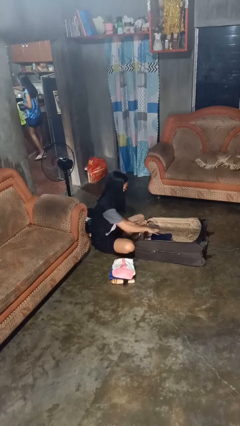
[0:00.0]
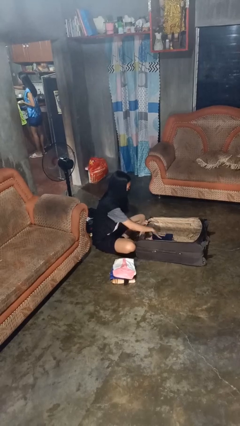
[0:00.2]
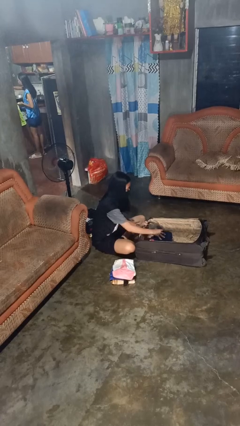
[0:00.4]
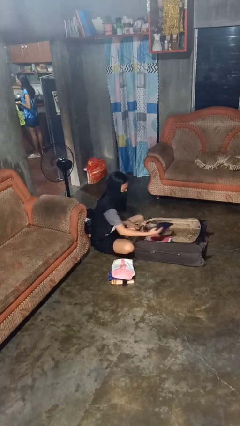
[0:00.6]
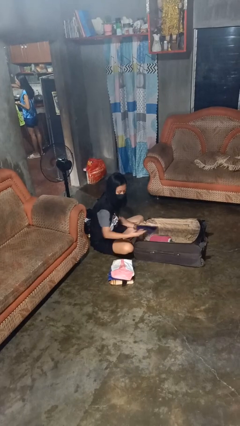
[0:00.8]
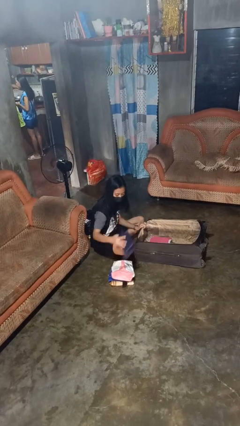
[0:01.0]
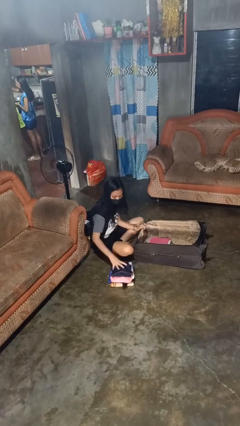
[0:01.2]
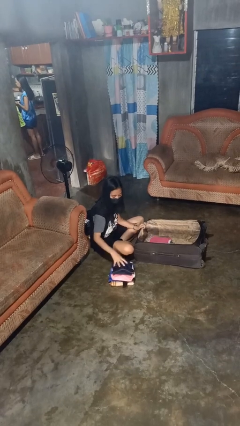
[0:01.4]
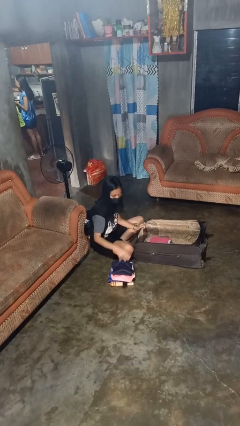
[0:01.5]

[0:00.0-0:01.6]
person unloads clothes from suitcase

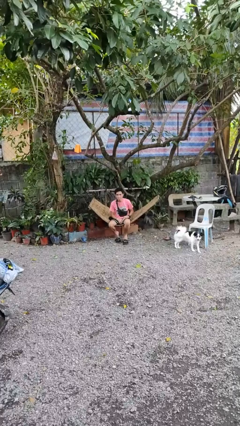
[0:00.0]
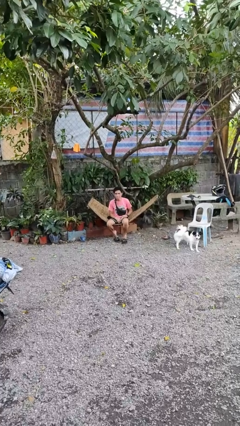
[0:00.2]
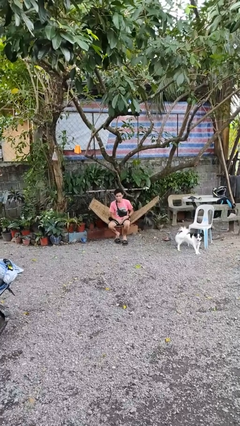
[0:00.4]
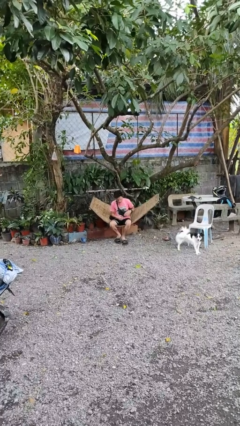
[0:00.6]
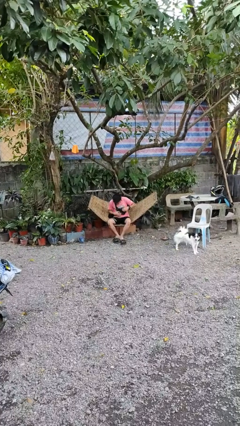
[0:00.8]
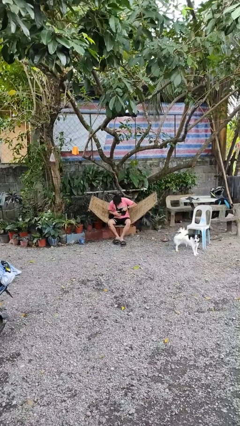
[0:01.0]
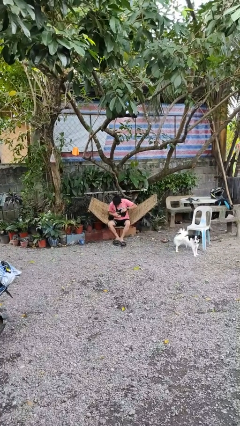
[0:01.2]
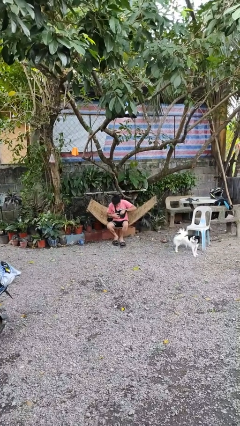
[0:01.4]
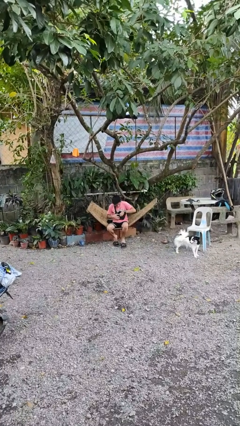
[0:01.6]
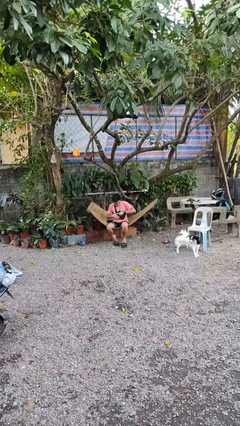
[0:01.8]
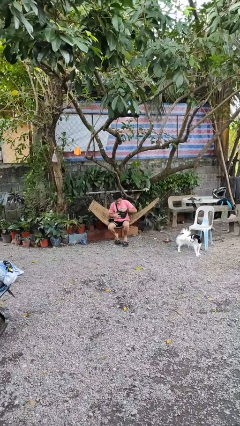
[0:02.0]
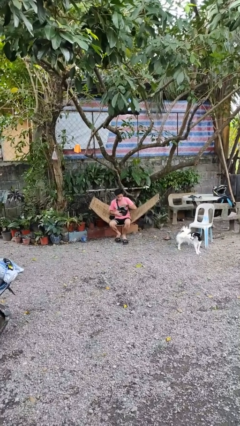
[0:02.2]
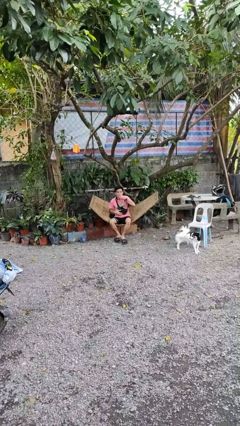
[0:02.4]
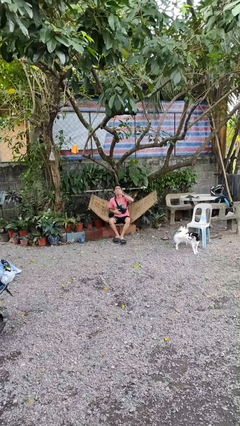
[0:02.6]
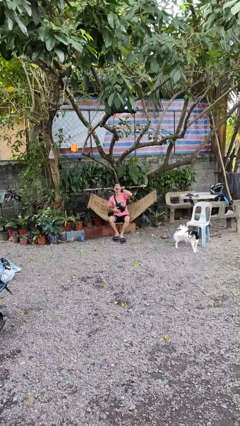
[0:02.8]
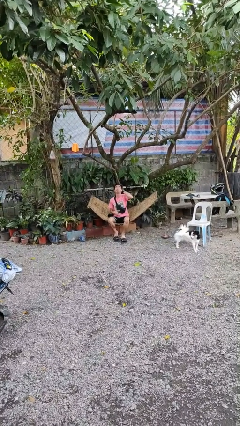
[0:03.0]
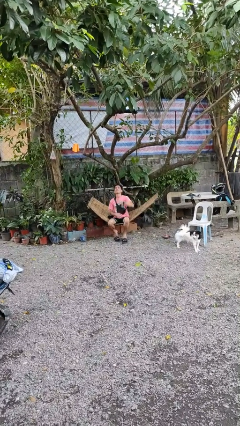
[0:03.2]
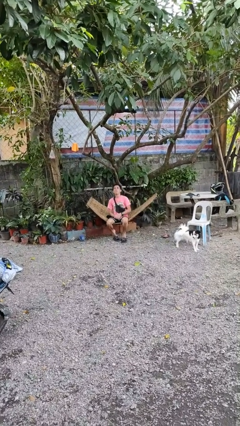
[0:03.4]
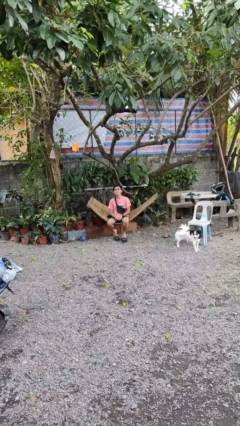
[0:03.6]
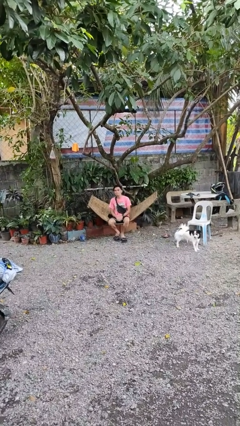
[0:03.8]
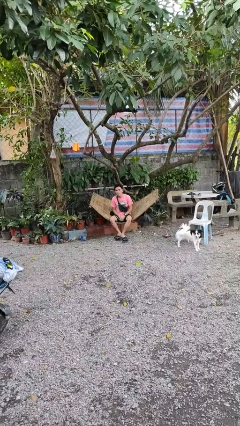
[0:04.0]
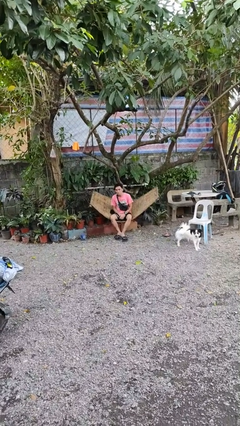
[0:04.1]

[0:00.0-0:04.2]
person eats snack from bag

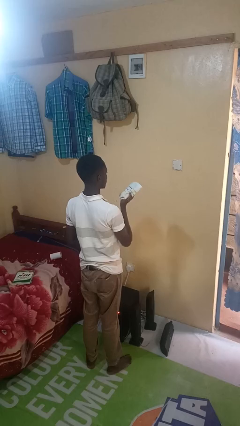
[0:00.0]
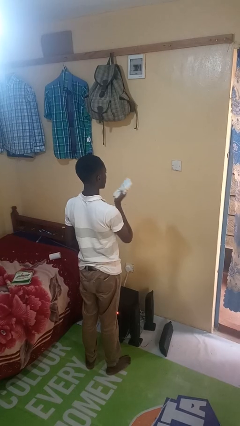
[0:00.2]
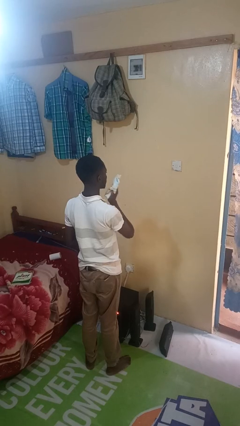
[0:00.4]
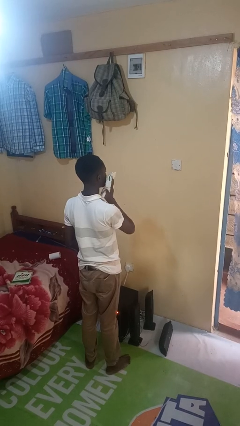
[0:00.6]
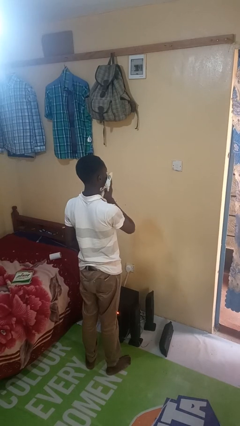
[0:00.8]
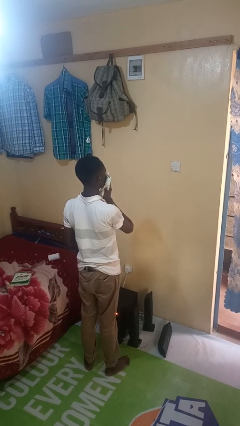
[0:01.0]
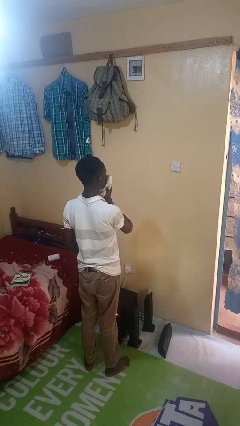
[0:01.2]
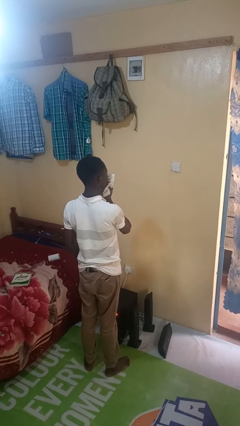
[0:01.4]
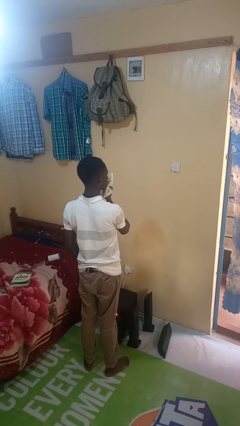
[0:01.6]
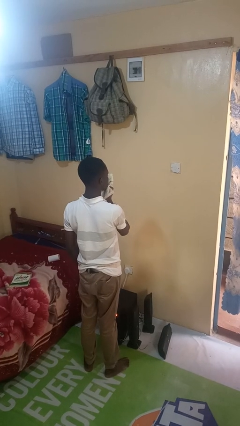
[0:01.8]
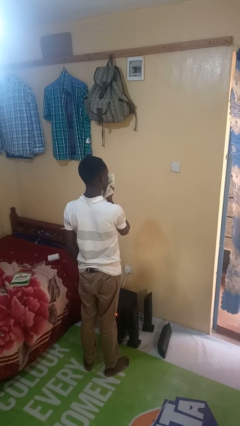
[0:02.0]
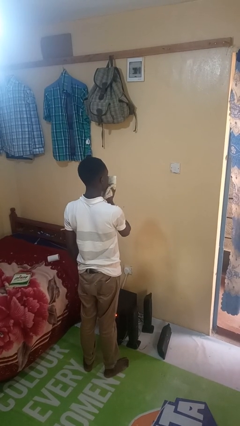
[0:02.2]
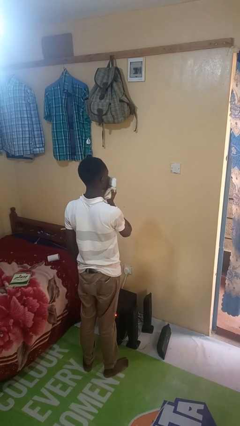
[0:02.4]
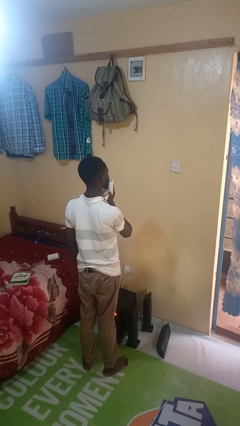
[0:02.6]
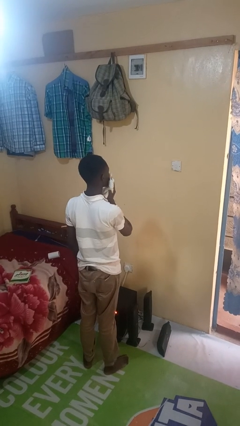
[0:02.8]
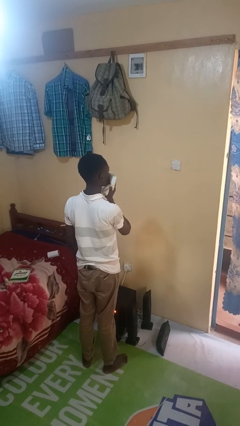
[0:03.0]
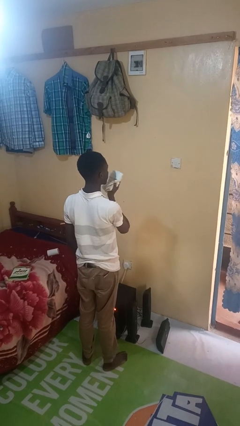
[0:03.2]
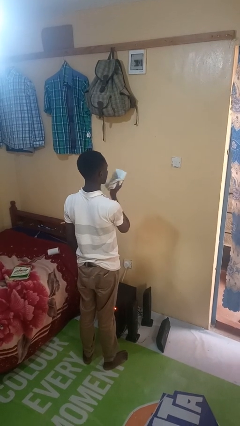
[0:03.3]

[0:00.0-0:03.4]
person wipes mouth with napkin

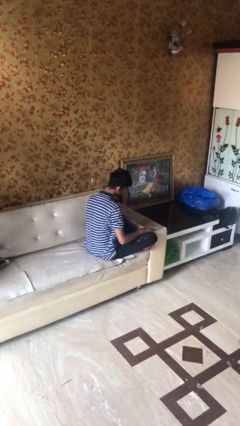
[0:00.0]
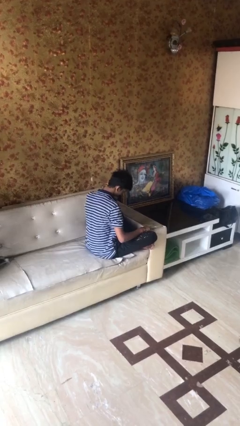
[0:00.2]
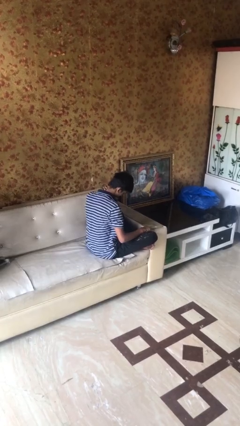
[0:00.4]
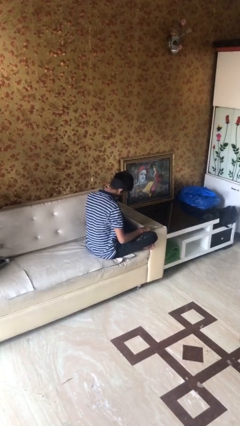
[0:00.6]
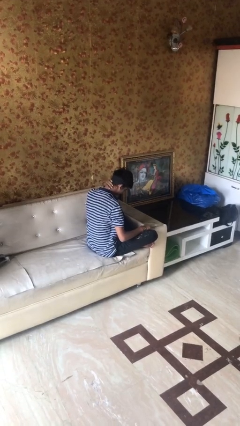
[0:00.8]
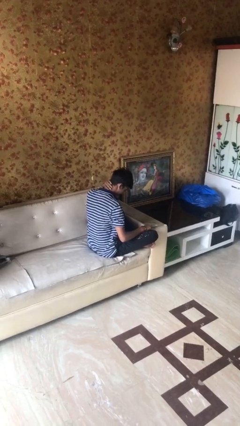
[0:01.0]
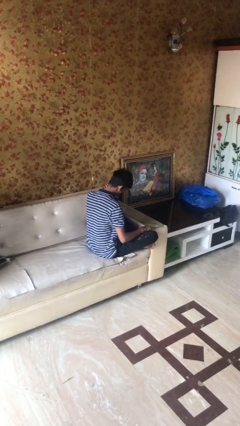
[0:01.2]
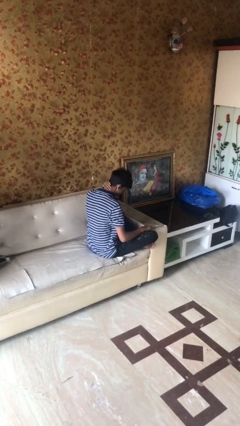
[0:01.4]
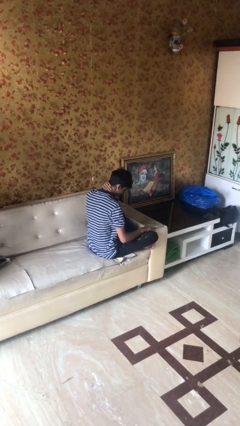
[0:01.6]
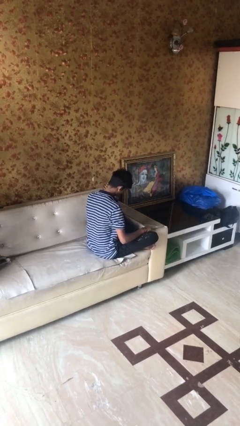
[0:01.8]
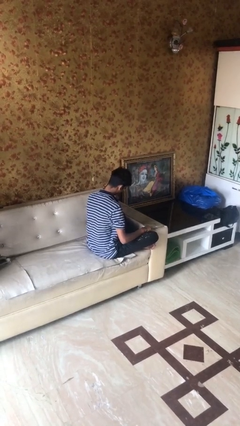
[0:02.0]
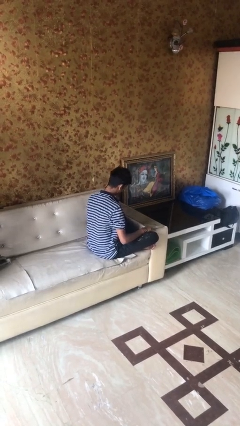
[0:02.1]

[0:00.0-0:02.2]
person rubs neck

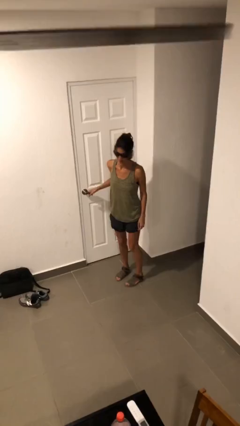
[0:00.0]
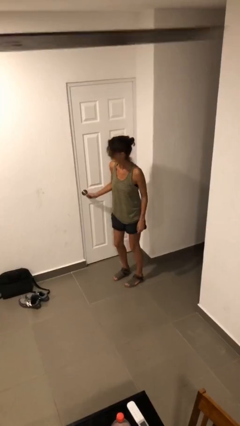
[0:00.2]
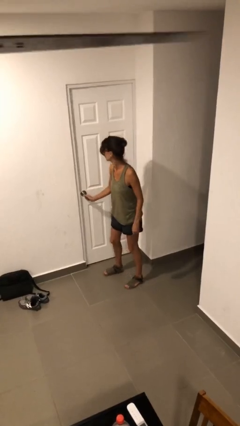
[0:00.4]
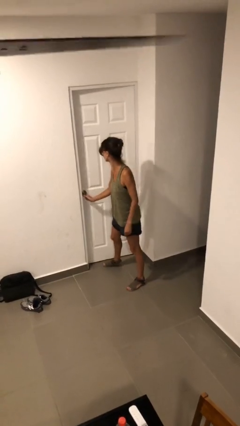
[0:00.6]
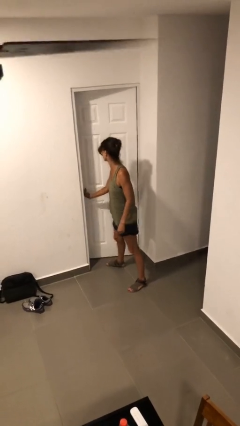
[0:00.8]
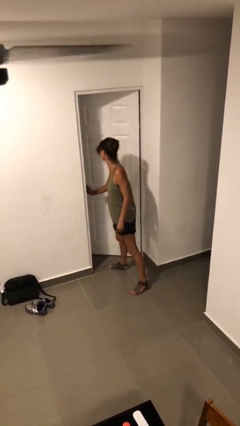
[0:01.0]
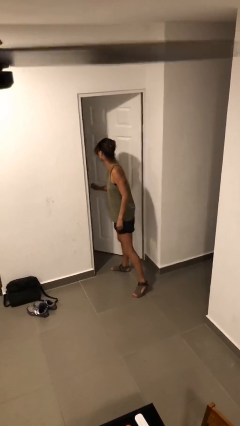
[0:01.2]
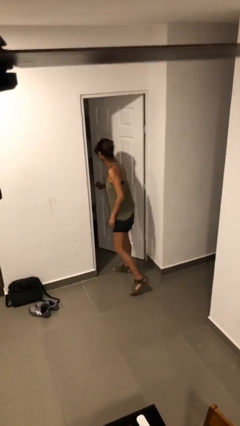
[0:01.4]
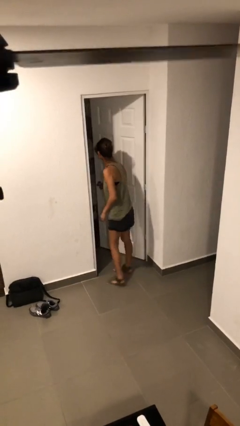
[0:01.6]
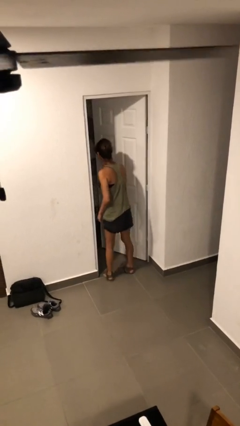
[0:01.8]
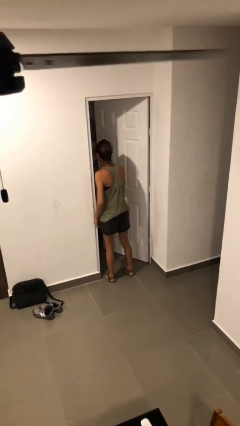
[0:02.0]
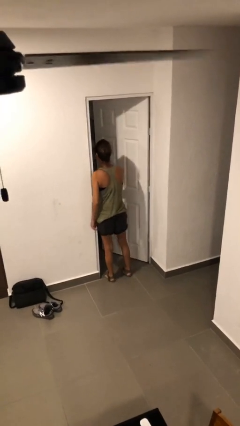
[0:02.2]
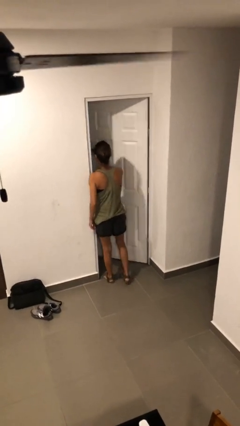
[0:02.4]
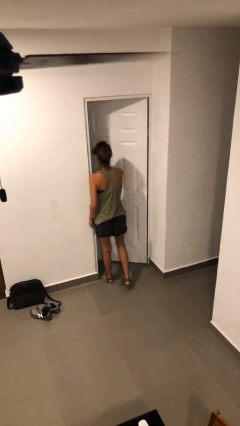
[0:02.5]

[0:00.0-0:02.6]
person opens facility door

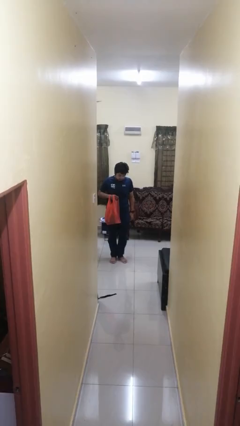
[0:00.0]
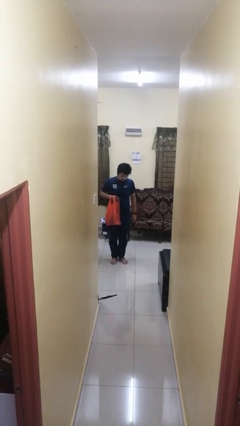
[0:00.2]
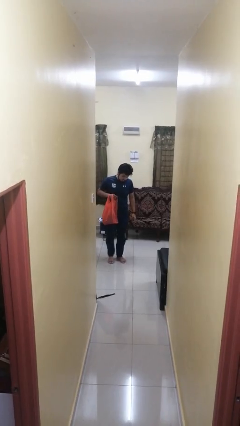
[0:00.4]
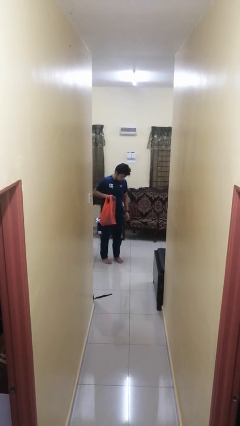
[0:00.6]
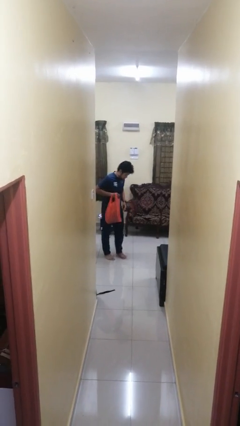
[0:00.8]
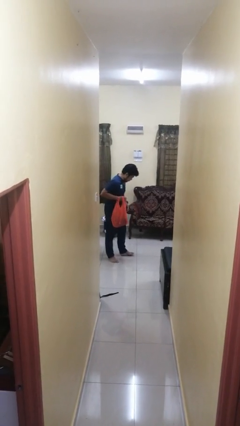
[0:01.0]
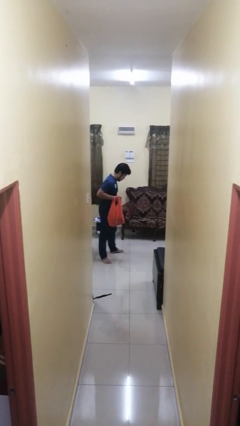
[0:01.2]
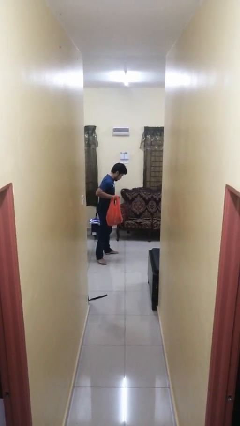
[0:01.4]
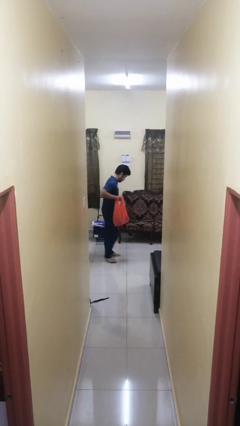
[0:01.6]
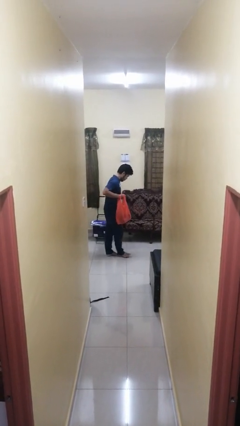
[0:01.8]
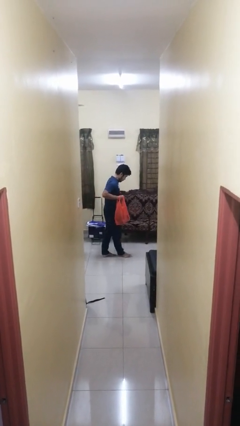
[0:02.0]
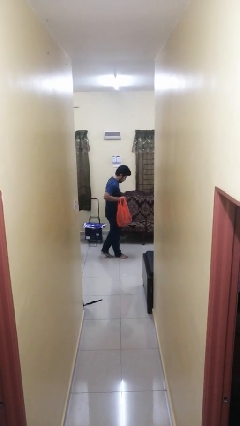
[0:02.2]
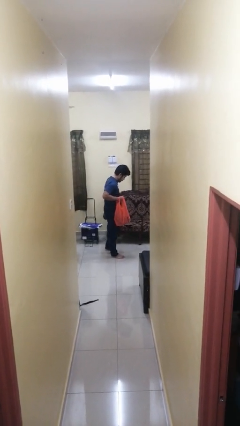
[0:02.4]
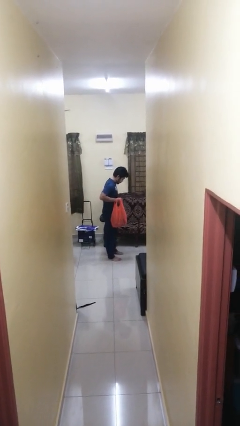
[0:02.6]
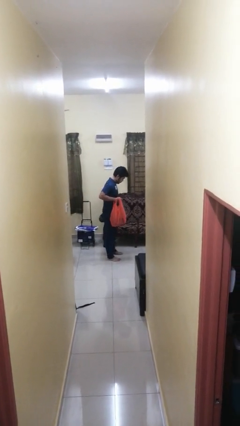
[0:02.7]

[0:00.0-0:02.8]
person carries groceries

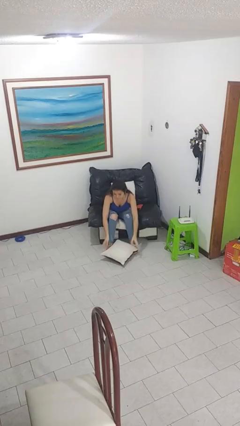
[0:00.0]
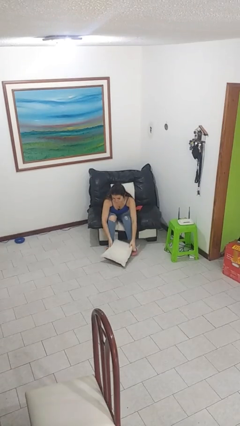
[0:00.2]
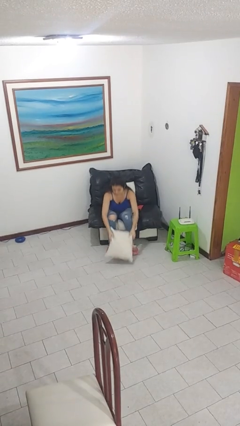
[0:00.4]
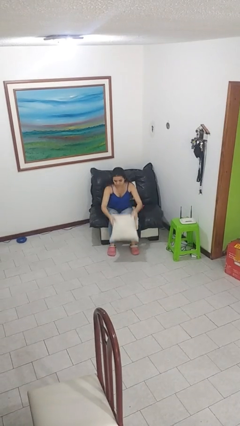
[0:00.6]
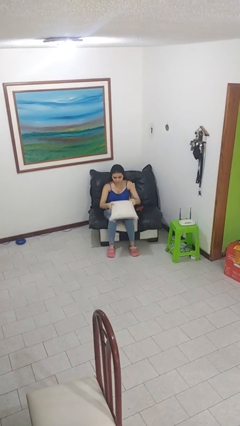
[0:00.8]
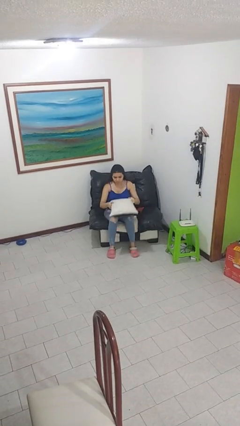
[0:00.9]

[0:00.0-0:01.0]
person picks up object from floor
